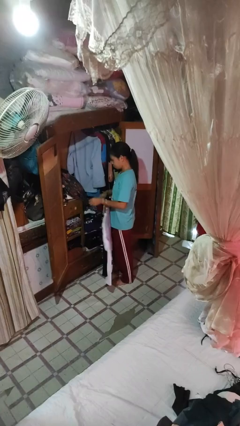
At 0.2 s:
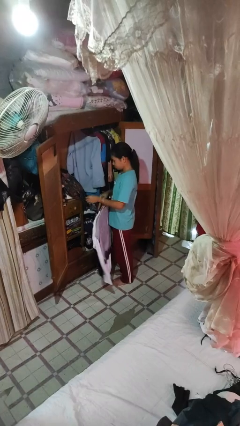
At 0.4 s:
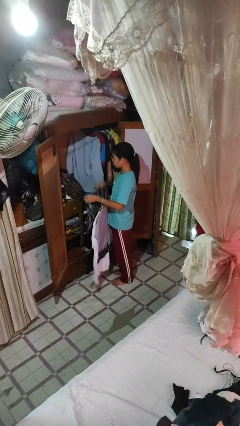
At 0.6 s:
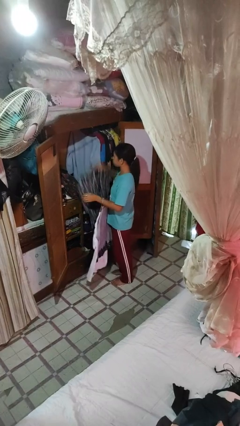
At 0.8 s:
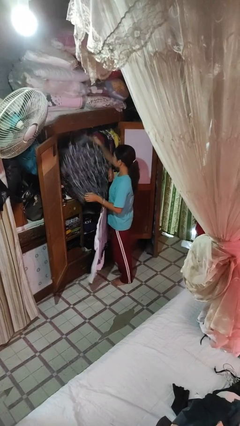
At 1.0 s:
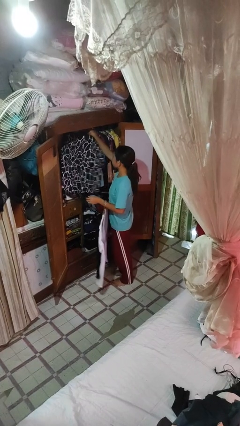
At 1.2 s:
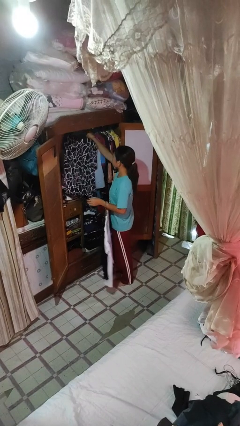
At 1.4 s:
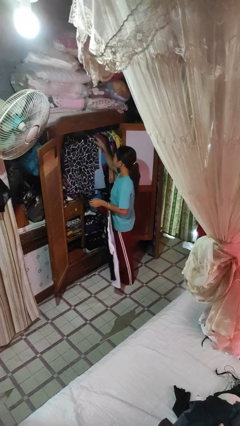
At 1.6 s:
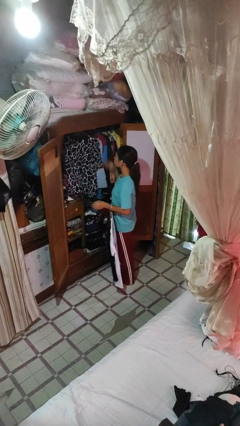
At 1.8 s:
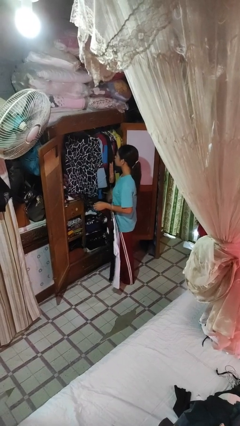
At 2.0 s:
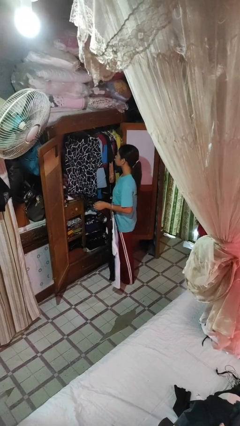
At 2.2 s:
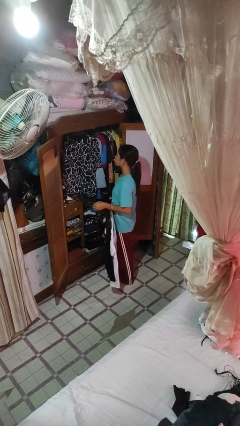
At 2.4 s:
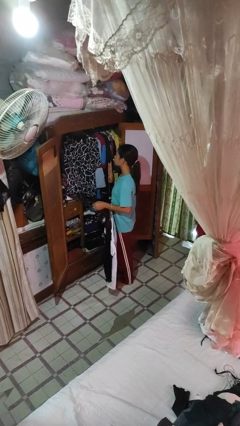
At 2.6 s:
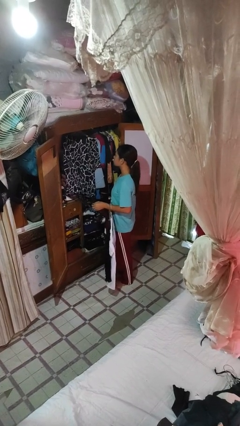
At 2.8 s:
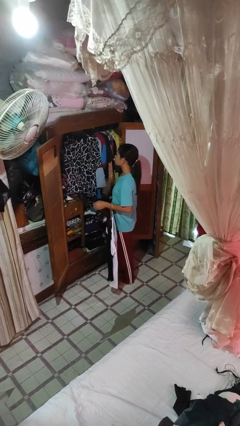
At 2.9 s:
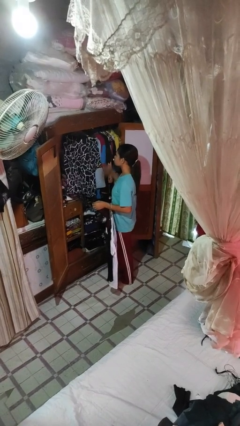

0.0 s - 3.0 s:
person puts clothes into closet

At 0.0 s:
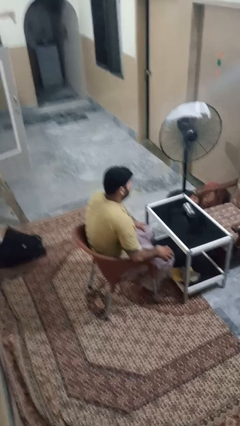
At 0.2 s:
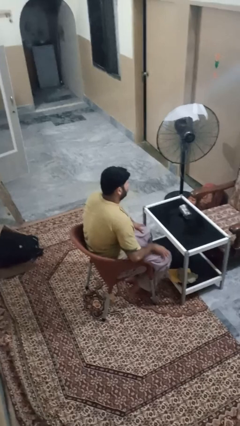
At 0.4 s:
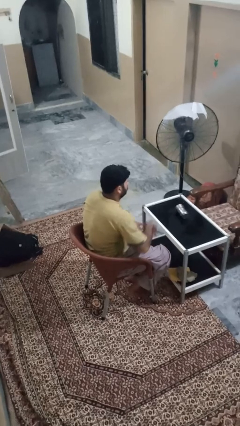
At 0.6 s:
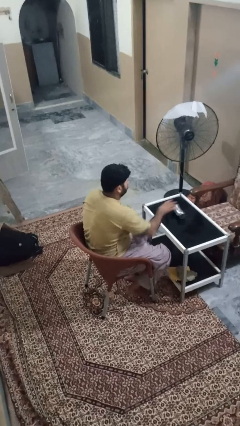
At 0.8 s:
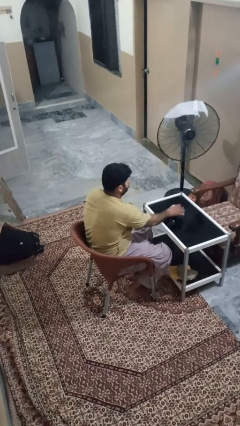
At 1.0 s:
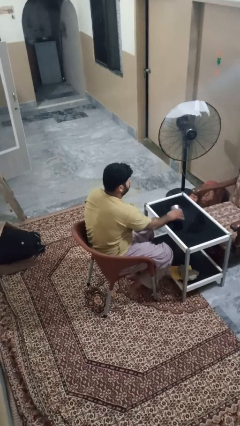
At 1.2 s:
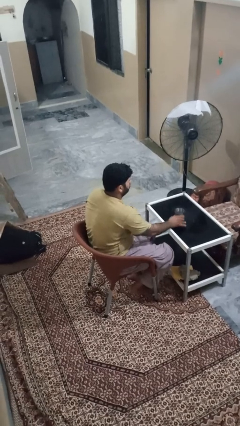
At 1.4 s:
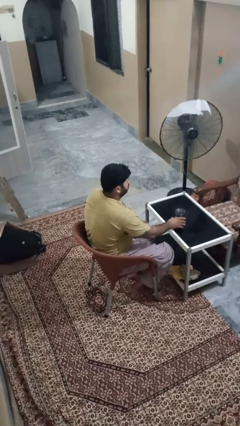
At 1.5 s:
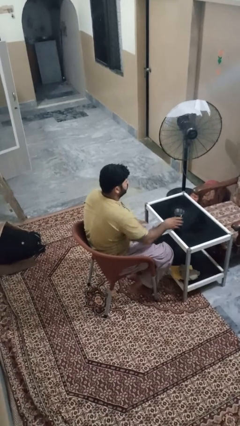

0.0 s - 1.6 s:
person sets upright glass

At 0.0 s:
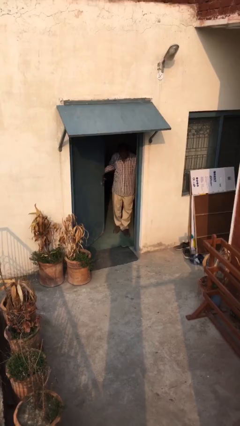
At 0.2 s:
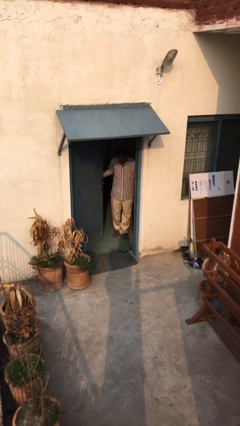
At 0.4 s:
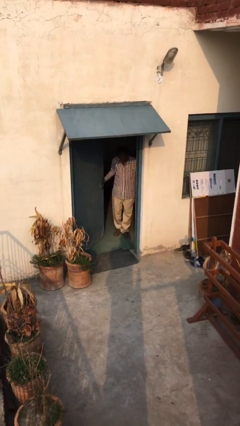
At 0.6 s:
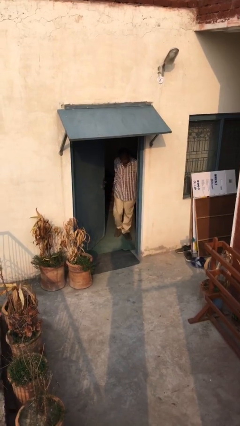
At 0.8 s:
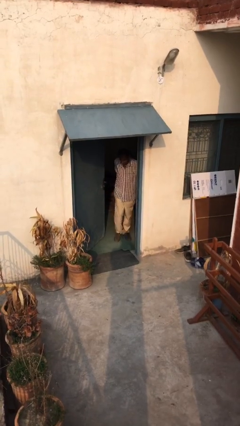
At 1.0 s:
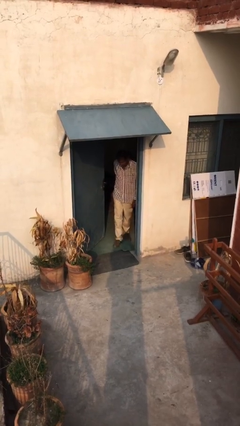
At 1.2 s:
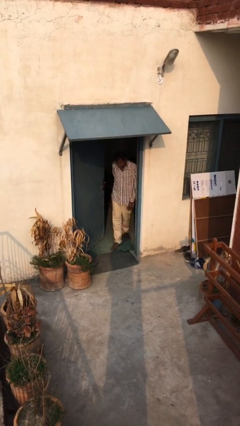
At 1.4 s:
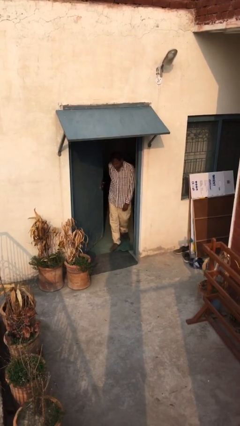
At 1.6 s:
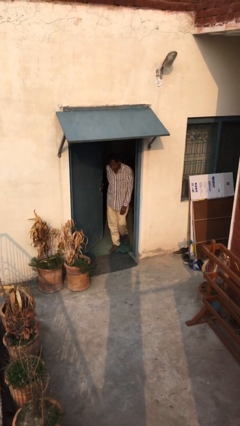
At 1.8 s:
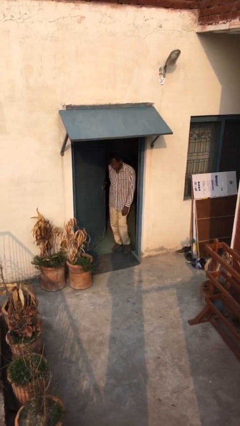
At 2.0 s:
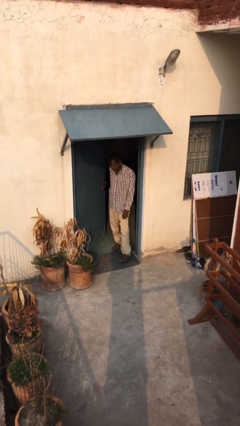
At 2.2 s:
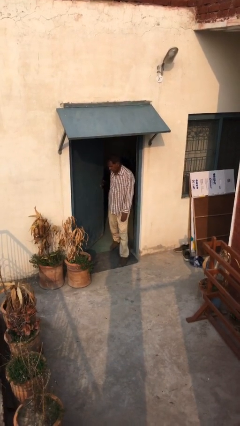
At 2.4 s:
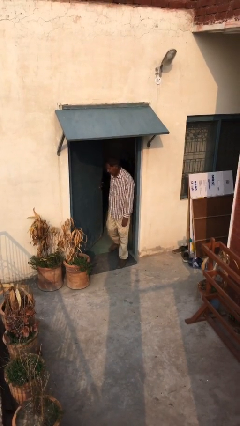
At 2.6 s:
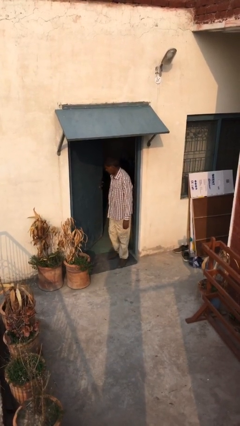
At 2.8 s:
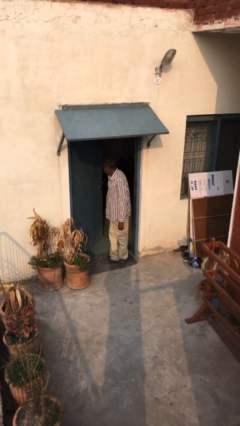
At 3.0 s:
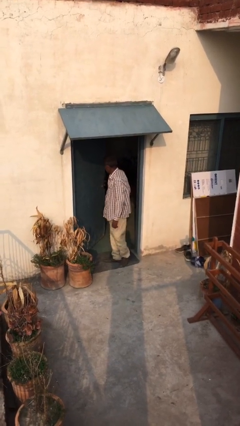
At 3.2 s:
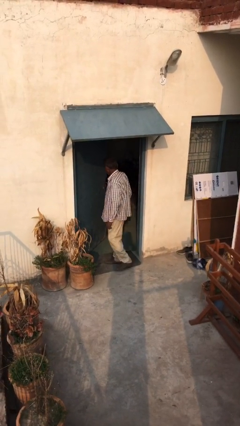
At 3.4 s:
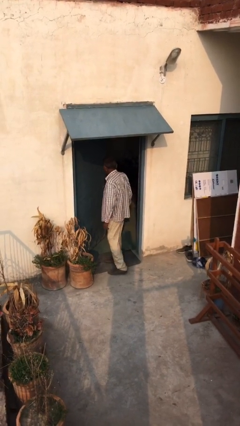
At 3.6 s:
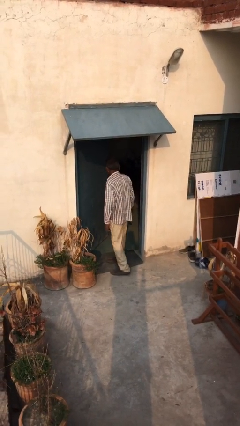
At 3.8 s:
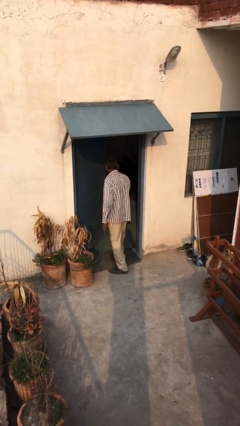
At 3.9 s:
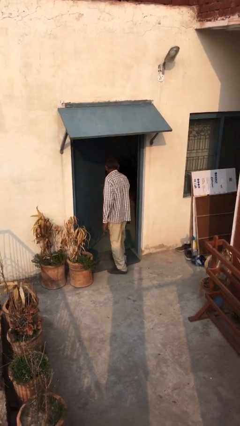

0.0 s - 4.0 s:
person enters scene through structure

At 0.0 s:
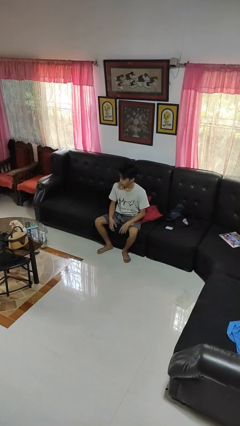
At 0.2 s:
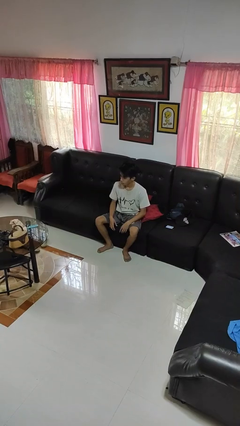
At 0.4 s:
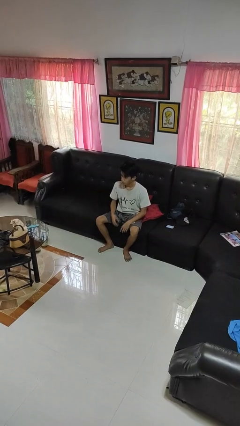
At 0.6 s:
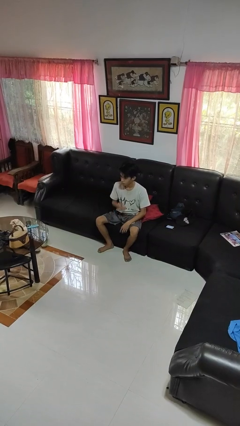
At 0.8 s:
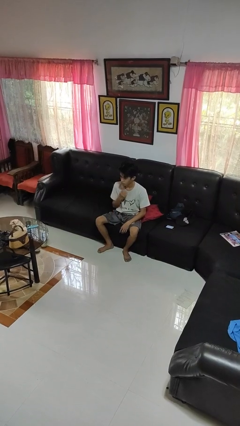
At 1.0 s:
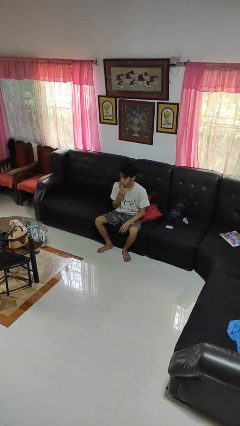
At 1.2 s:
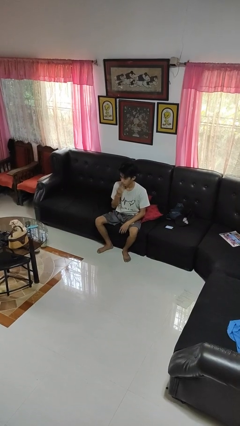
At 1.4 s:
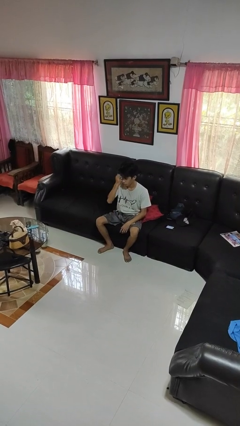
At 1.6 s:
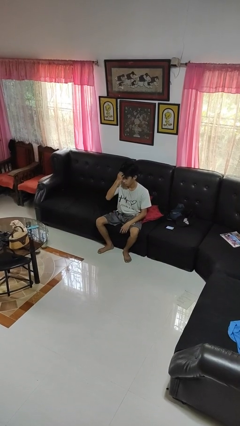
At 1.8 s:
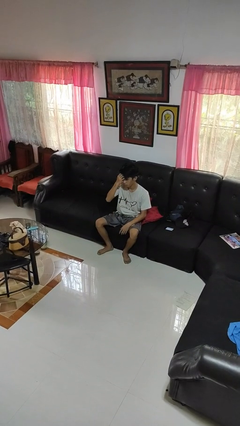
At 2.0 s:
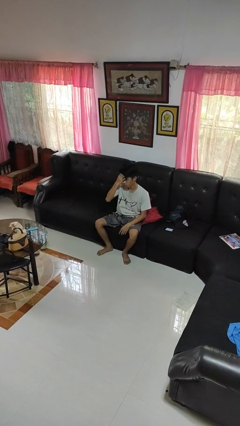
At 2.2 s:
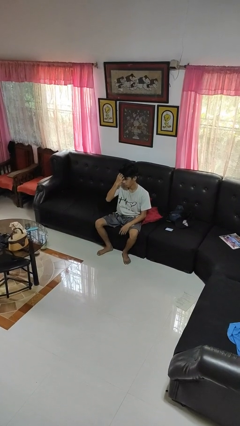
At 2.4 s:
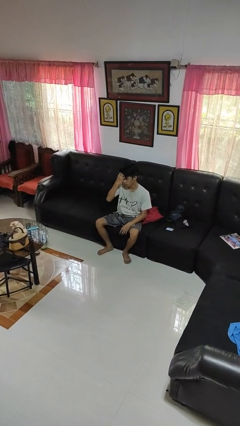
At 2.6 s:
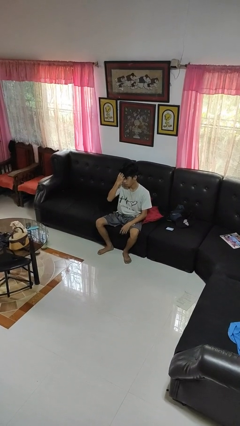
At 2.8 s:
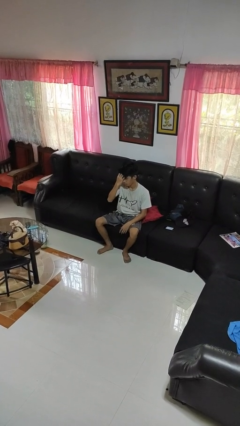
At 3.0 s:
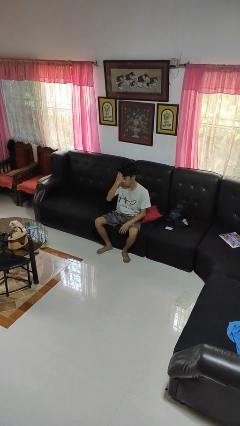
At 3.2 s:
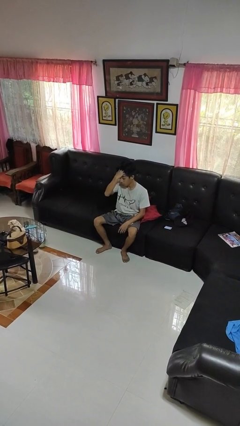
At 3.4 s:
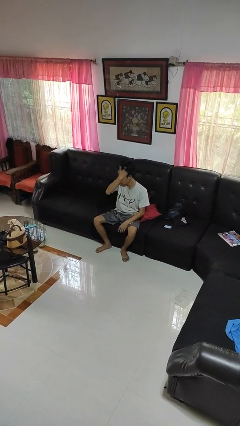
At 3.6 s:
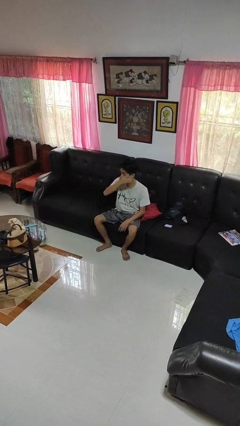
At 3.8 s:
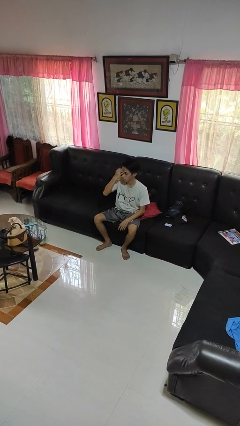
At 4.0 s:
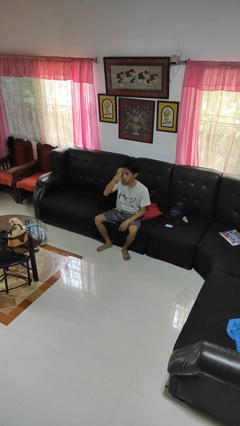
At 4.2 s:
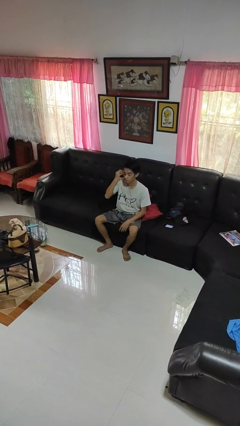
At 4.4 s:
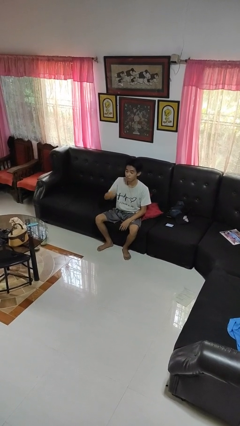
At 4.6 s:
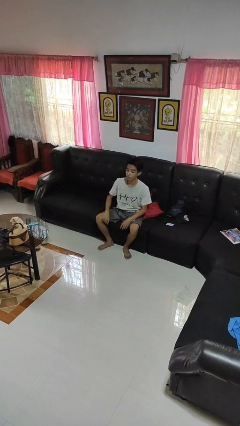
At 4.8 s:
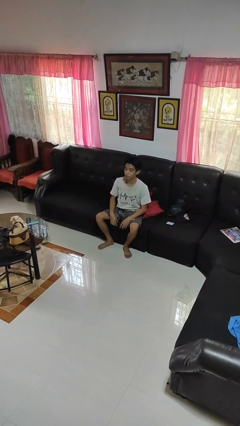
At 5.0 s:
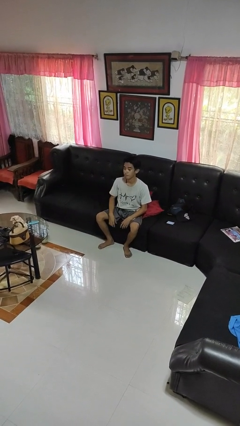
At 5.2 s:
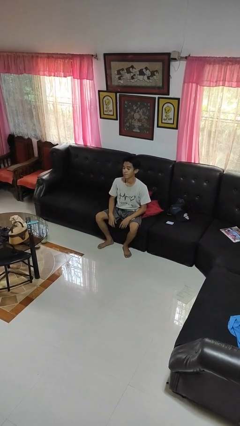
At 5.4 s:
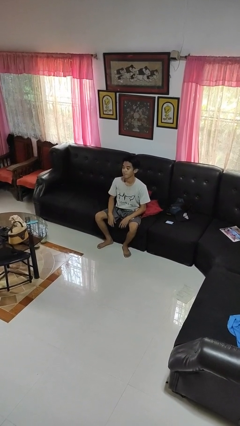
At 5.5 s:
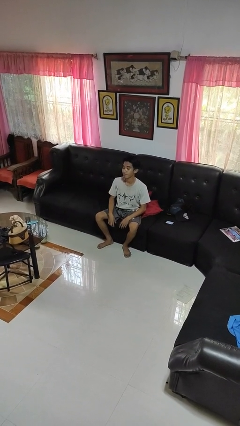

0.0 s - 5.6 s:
person scratches face

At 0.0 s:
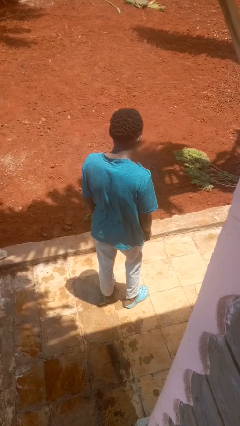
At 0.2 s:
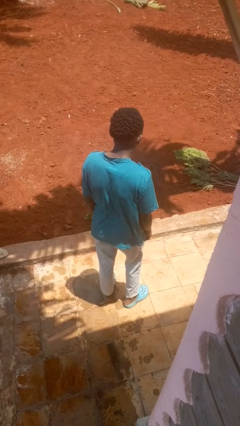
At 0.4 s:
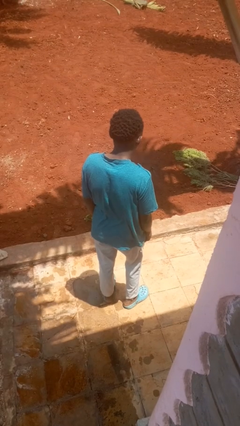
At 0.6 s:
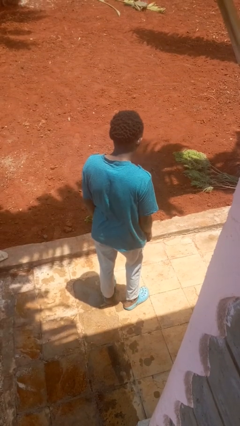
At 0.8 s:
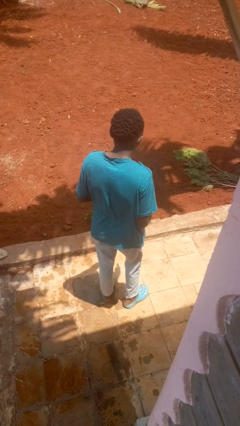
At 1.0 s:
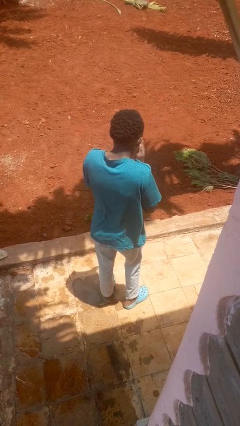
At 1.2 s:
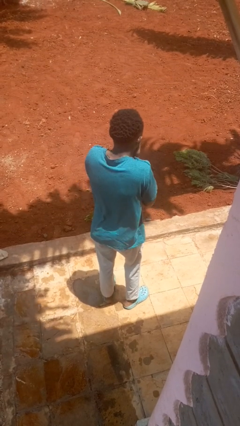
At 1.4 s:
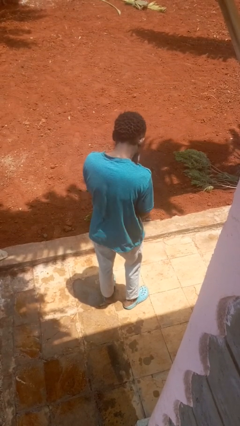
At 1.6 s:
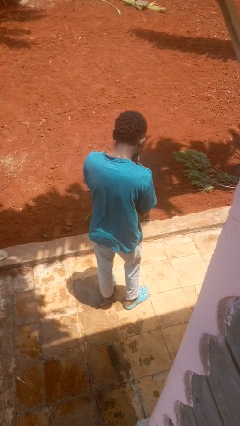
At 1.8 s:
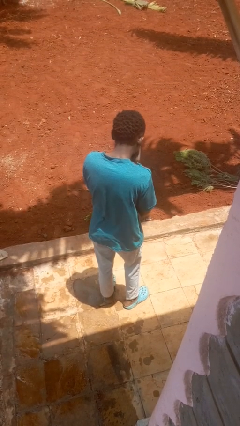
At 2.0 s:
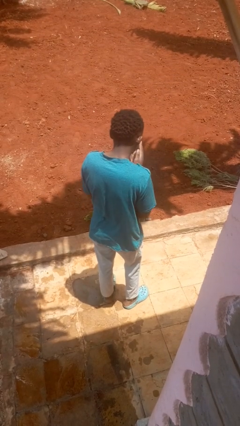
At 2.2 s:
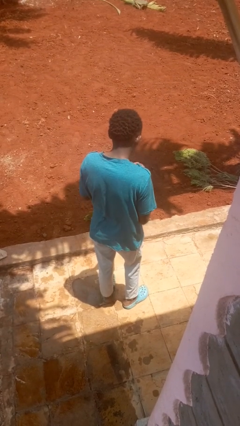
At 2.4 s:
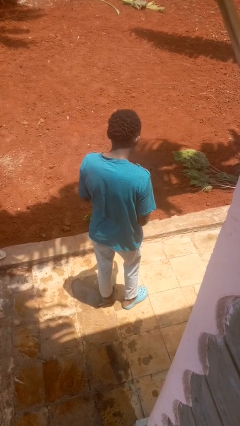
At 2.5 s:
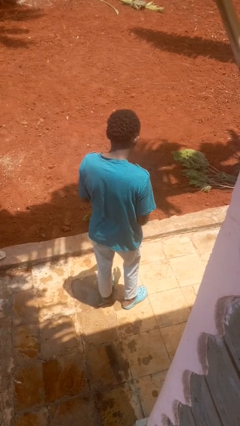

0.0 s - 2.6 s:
person sneezes into hand

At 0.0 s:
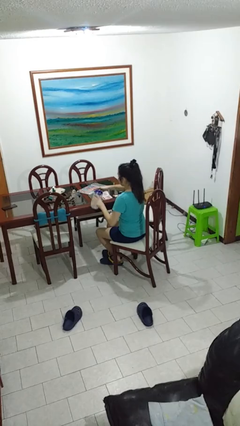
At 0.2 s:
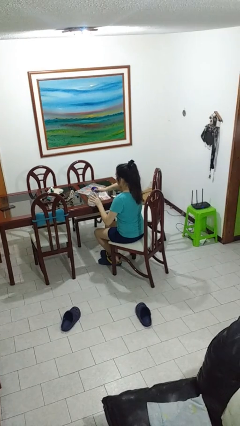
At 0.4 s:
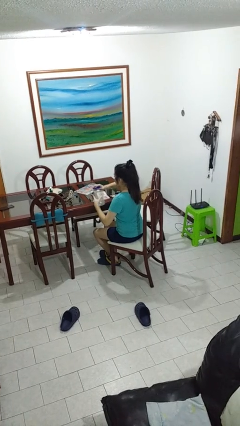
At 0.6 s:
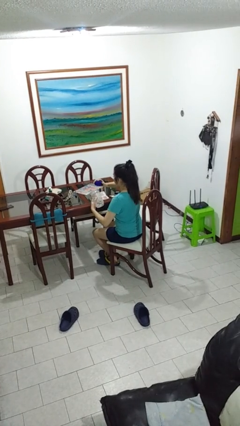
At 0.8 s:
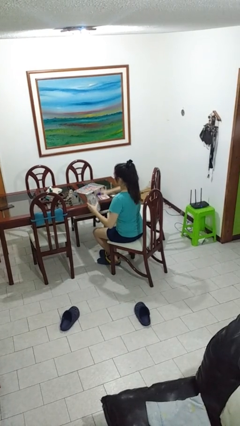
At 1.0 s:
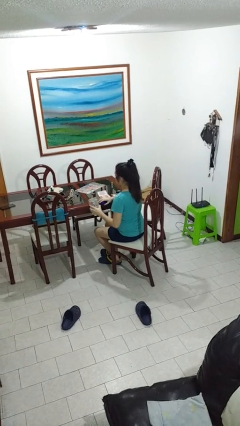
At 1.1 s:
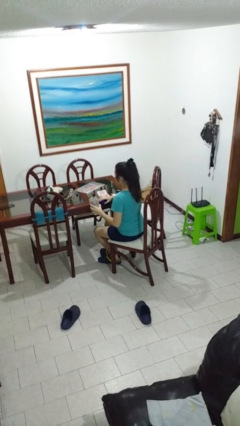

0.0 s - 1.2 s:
person opens jar
